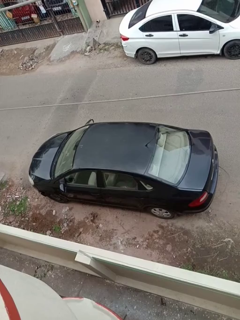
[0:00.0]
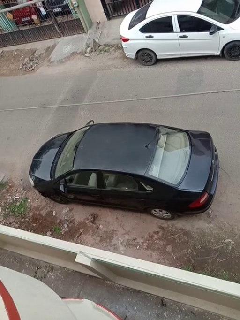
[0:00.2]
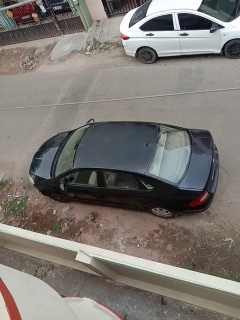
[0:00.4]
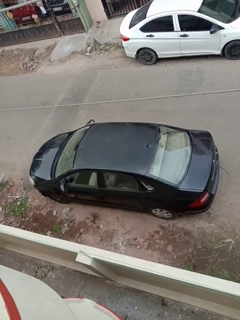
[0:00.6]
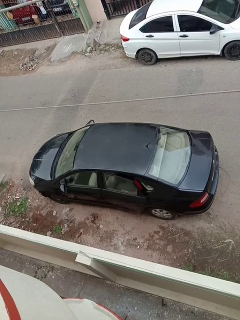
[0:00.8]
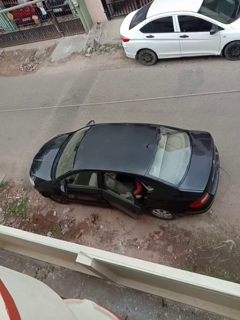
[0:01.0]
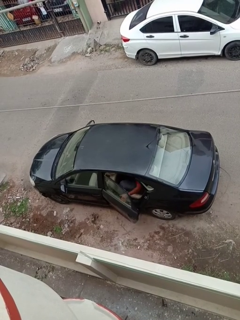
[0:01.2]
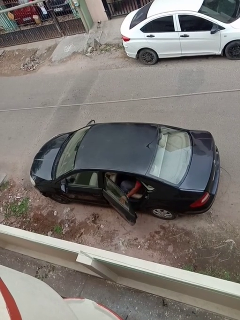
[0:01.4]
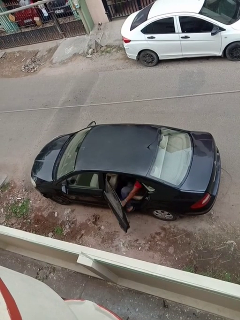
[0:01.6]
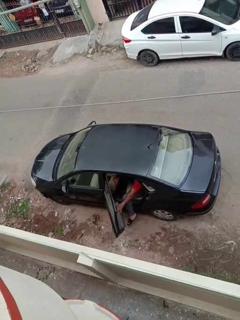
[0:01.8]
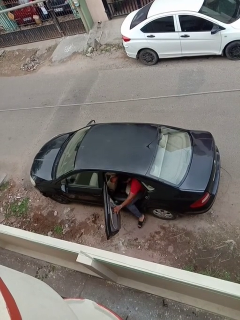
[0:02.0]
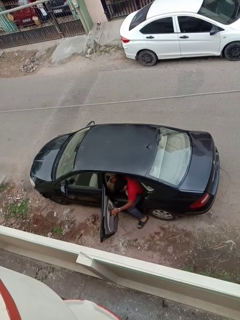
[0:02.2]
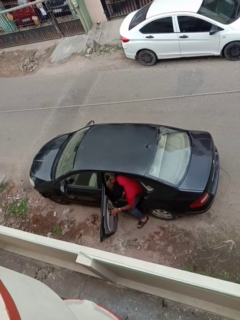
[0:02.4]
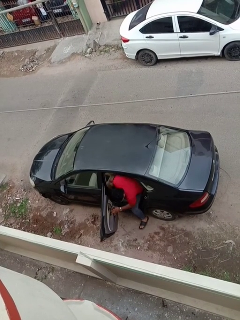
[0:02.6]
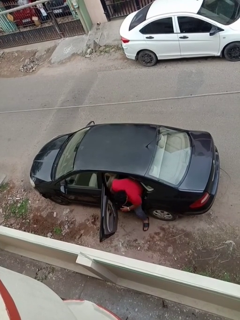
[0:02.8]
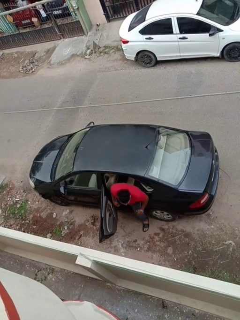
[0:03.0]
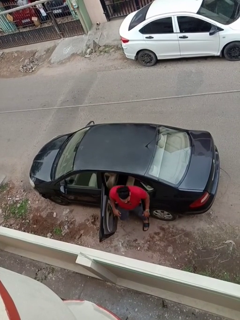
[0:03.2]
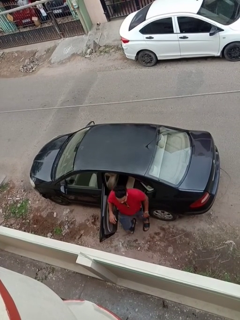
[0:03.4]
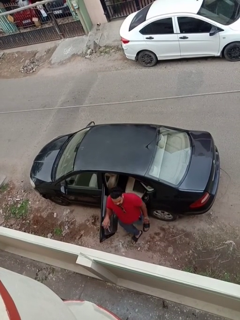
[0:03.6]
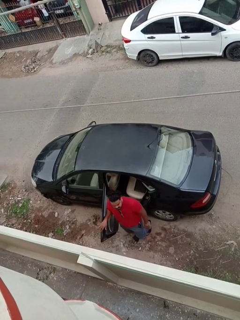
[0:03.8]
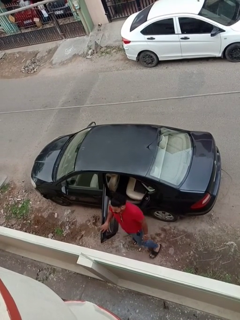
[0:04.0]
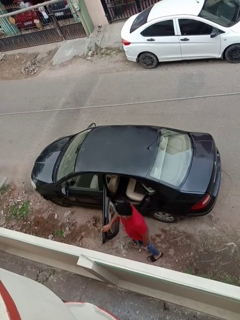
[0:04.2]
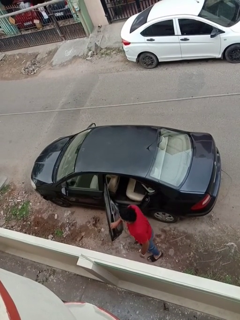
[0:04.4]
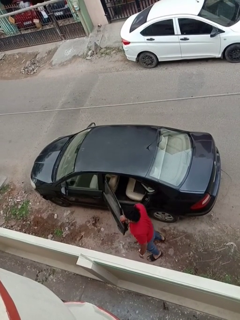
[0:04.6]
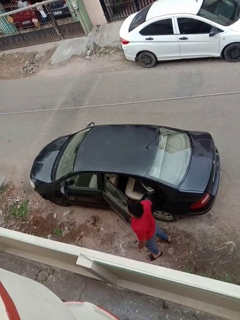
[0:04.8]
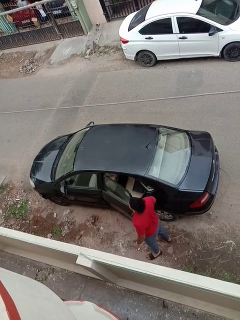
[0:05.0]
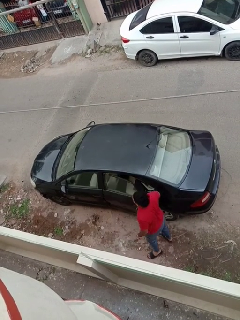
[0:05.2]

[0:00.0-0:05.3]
car drops off person

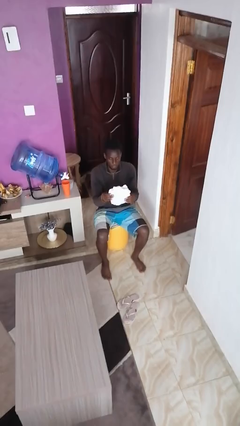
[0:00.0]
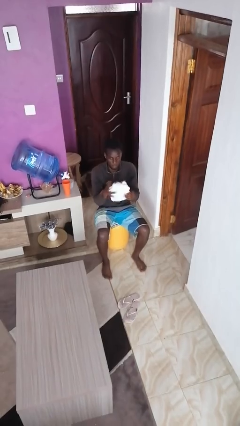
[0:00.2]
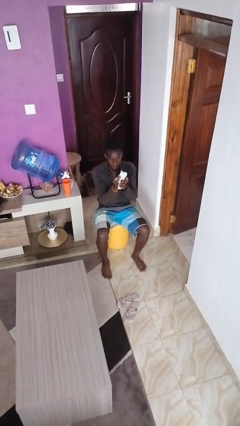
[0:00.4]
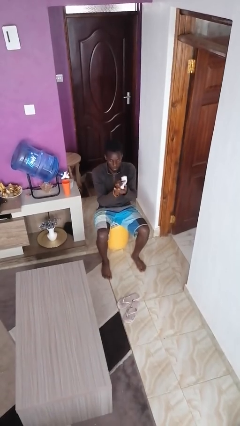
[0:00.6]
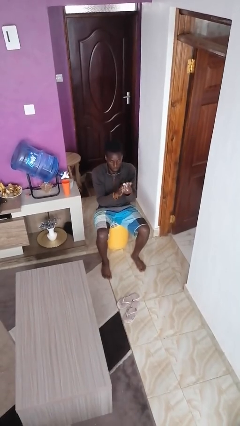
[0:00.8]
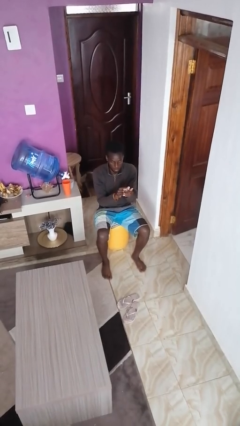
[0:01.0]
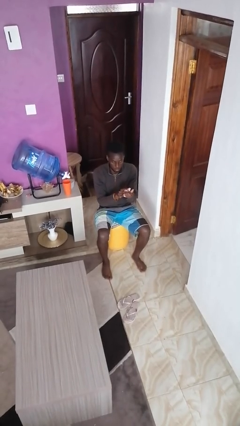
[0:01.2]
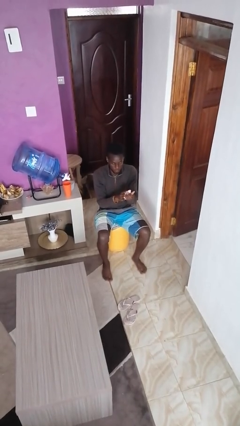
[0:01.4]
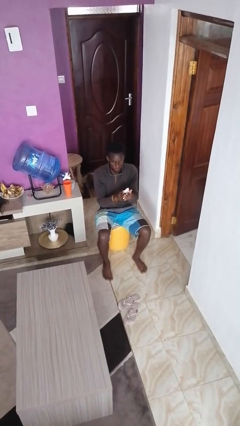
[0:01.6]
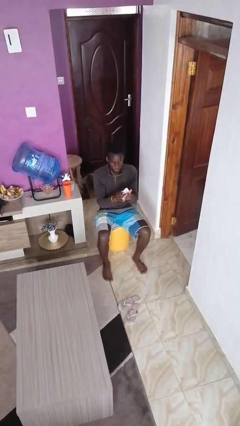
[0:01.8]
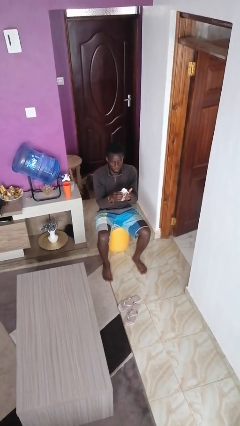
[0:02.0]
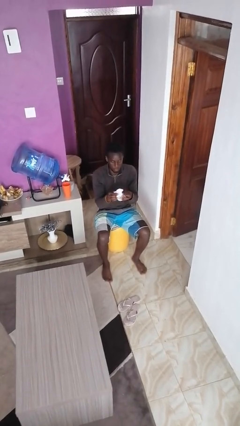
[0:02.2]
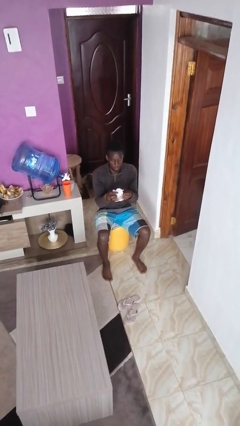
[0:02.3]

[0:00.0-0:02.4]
person crumples paper

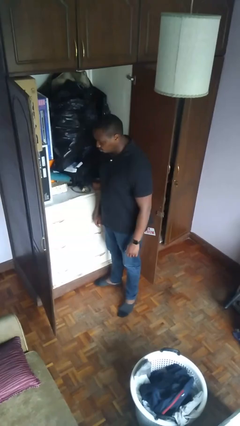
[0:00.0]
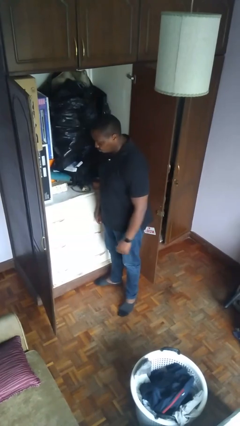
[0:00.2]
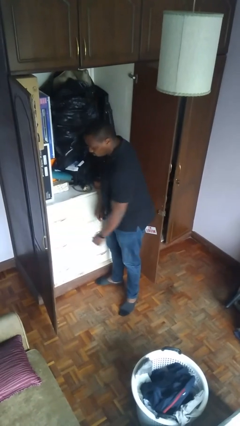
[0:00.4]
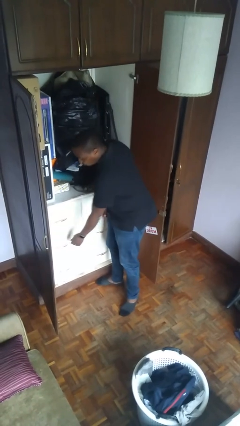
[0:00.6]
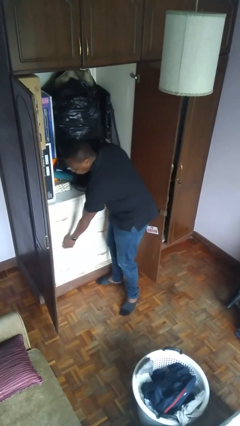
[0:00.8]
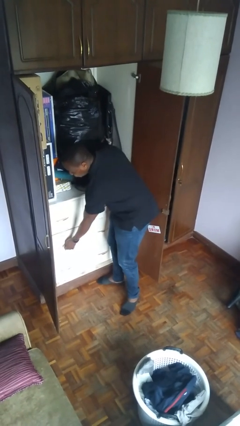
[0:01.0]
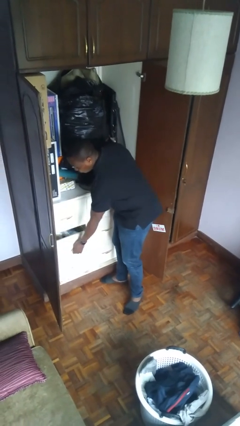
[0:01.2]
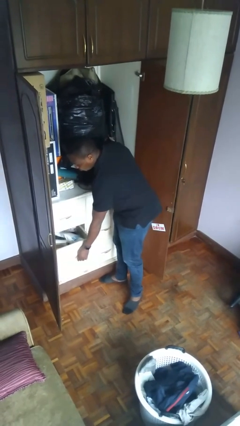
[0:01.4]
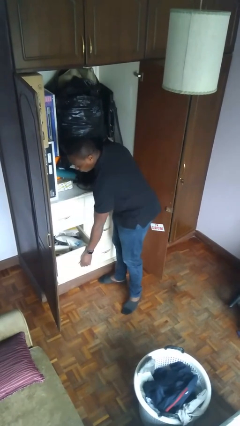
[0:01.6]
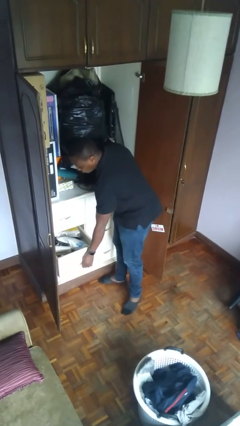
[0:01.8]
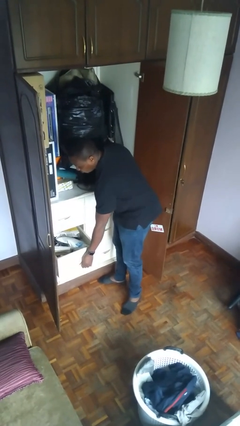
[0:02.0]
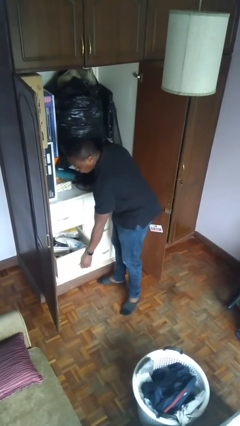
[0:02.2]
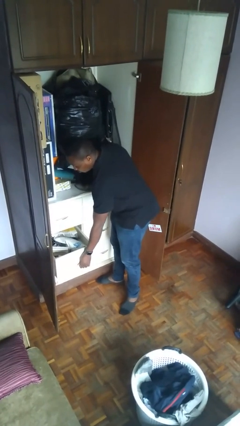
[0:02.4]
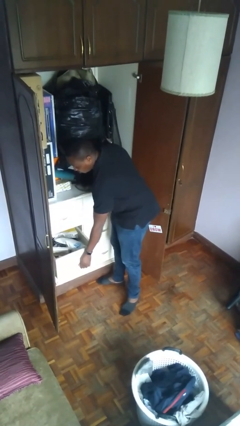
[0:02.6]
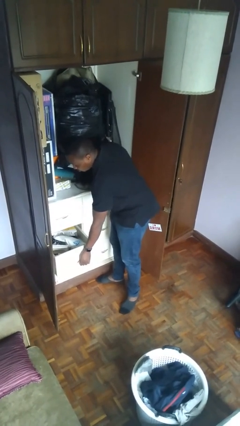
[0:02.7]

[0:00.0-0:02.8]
person opens dresser drawer

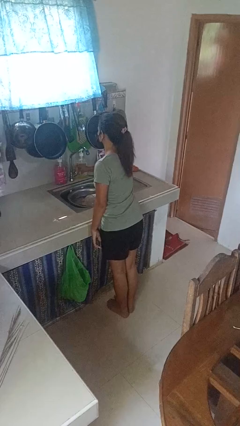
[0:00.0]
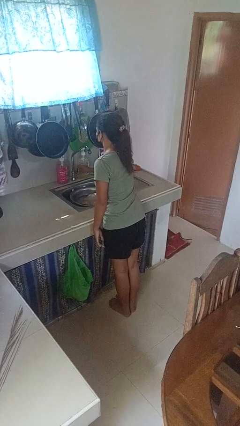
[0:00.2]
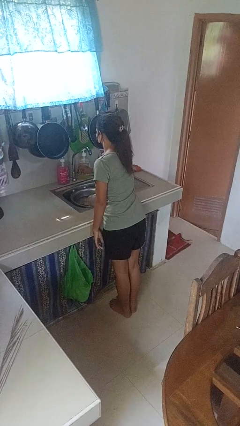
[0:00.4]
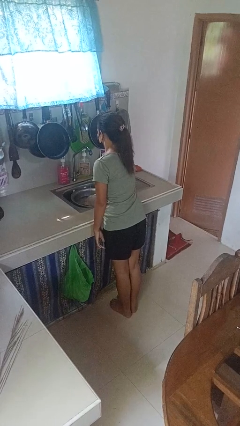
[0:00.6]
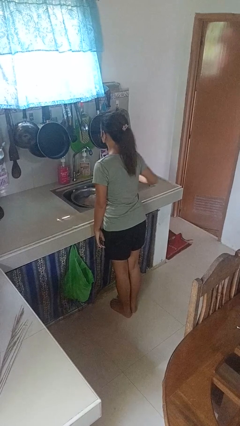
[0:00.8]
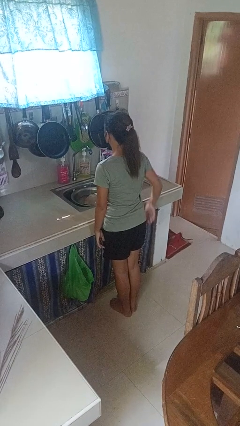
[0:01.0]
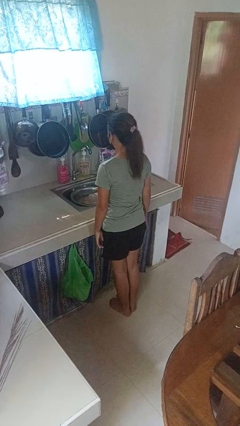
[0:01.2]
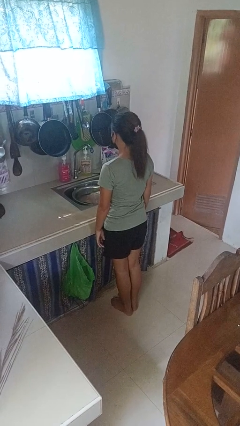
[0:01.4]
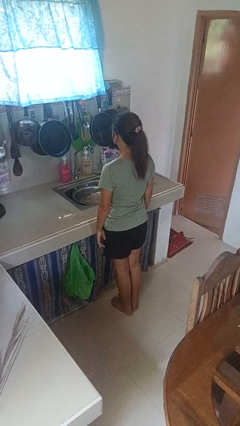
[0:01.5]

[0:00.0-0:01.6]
person turns on faucet

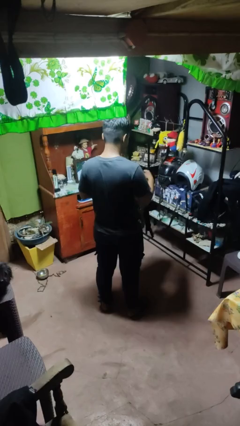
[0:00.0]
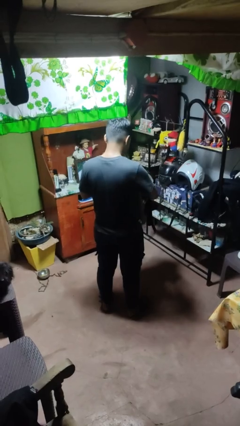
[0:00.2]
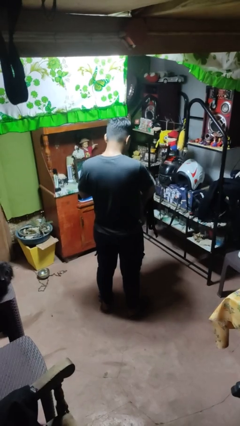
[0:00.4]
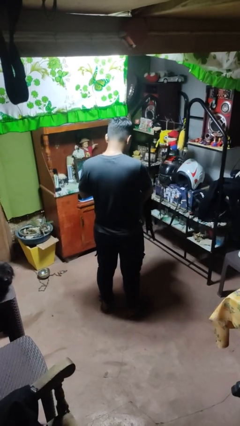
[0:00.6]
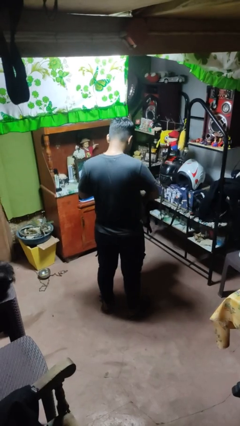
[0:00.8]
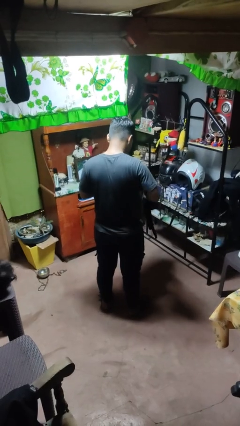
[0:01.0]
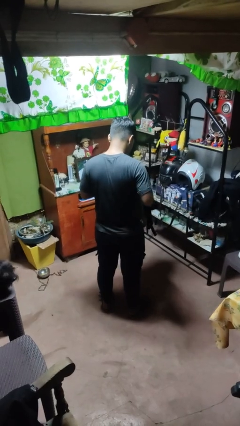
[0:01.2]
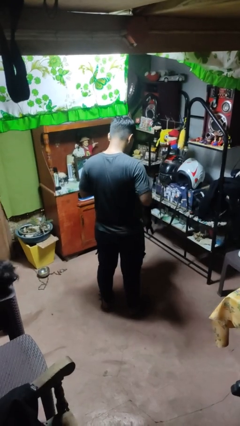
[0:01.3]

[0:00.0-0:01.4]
person puts object into bag

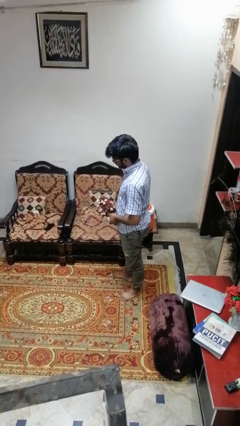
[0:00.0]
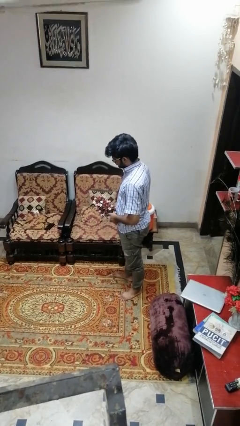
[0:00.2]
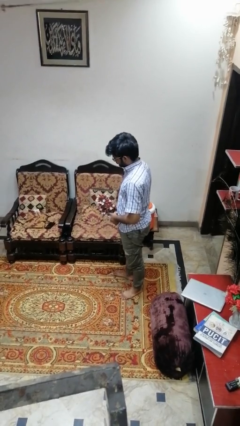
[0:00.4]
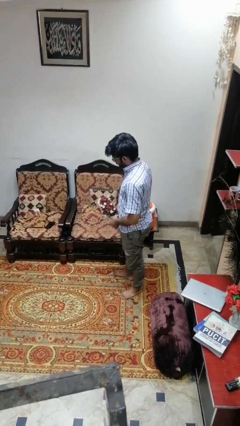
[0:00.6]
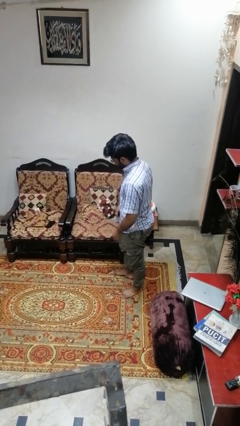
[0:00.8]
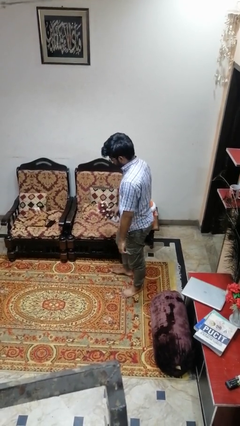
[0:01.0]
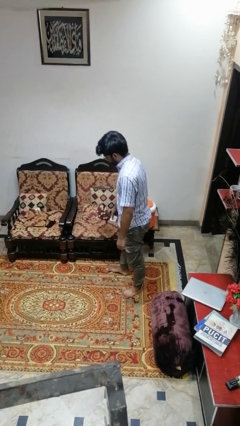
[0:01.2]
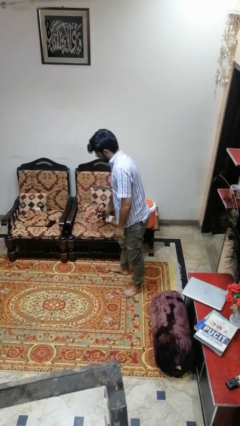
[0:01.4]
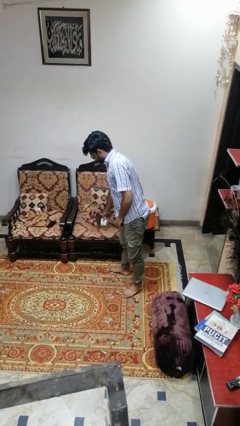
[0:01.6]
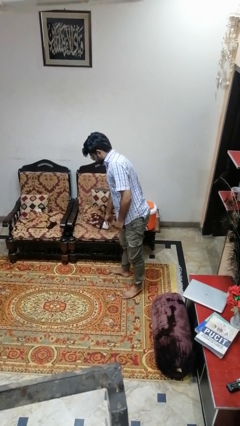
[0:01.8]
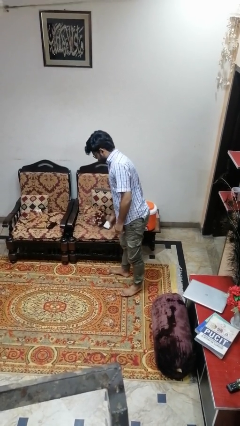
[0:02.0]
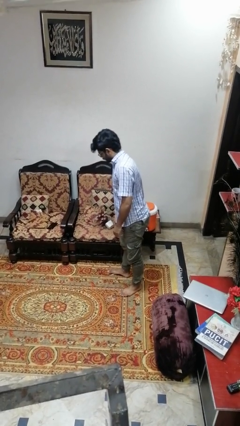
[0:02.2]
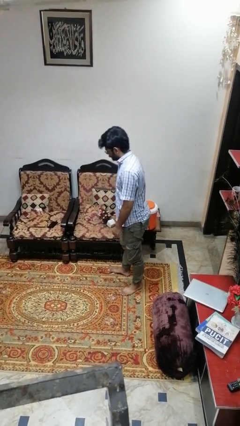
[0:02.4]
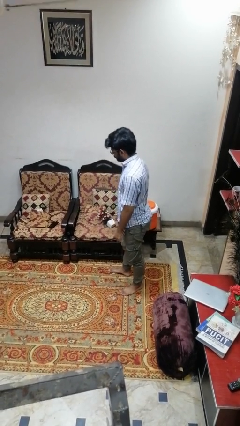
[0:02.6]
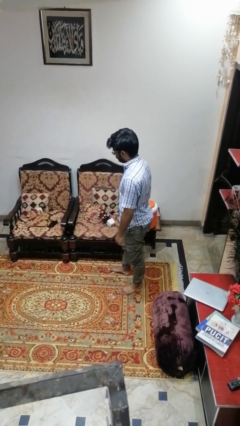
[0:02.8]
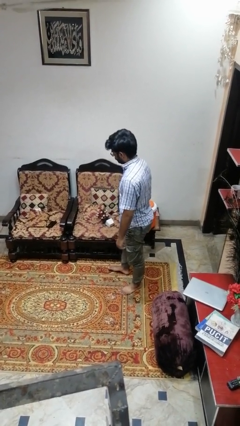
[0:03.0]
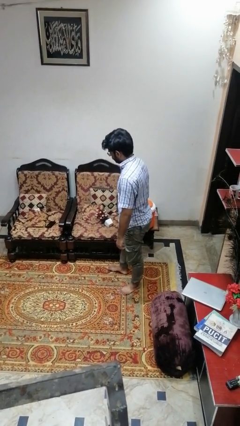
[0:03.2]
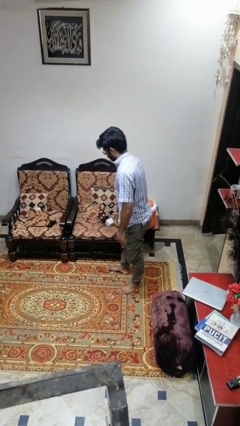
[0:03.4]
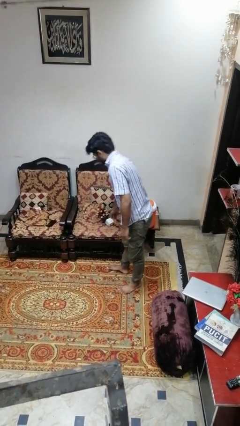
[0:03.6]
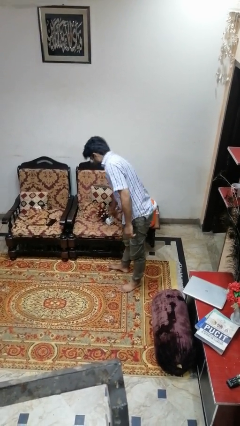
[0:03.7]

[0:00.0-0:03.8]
person puts down object on couch

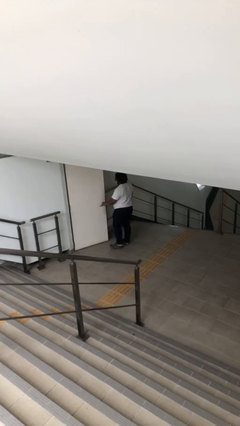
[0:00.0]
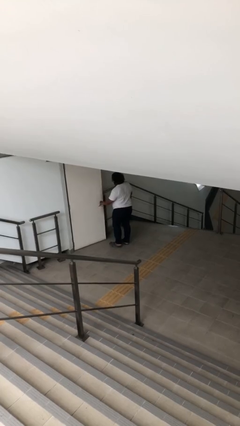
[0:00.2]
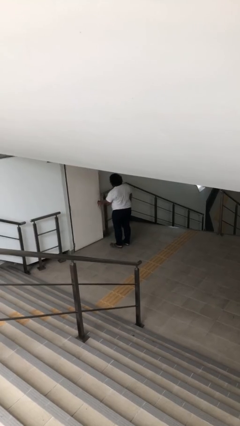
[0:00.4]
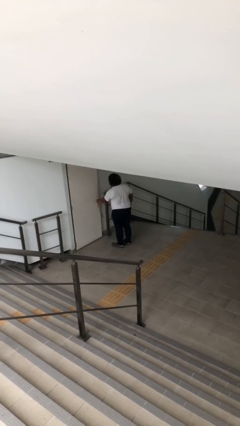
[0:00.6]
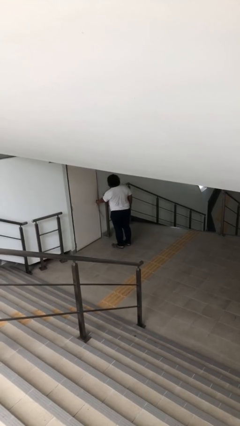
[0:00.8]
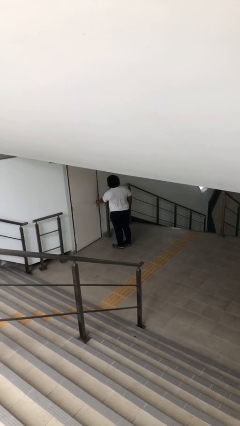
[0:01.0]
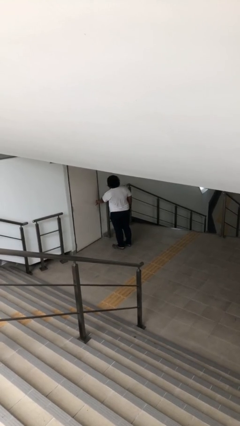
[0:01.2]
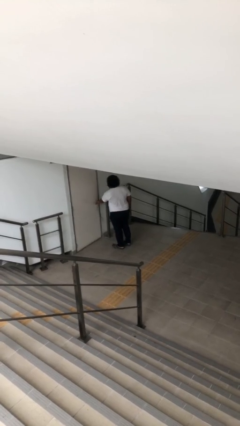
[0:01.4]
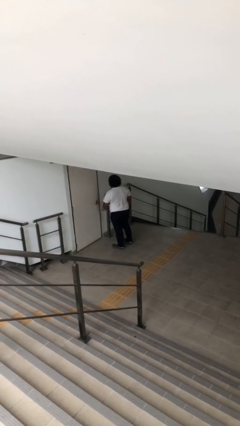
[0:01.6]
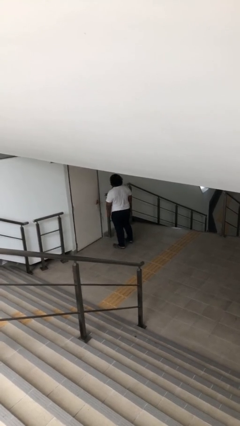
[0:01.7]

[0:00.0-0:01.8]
person closes facility door
